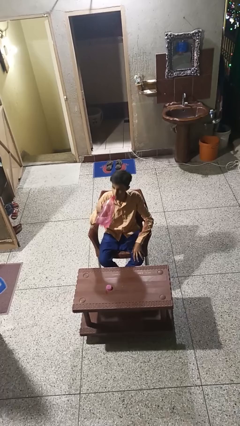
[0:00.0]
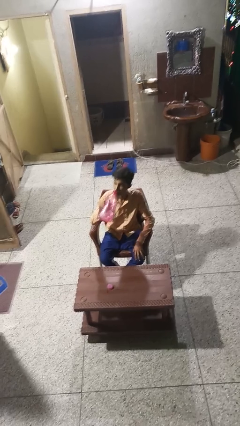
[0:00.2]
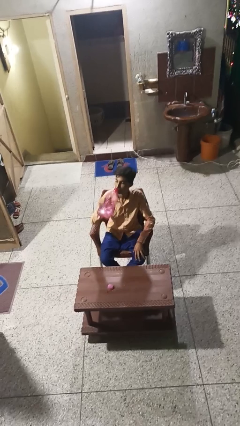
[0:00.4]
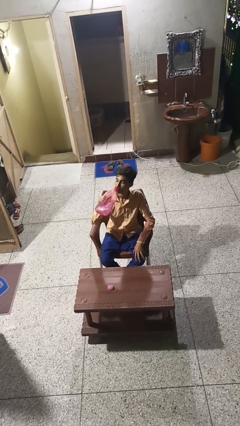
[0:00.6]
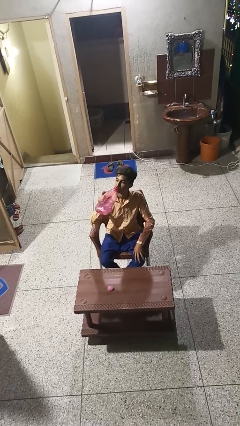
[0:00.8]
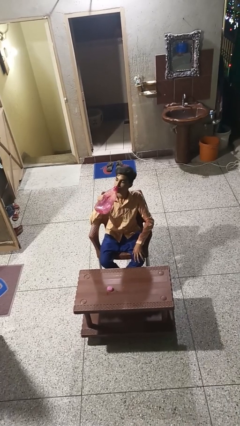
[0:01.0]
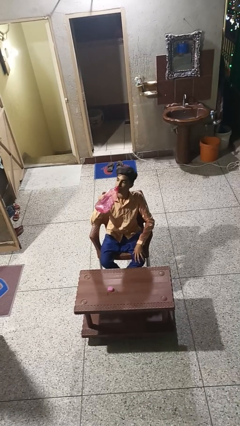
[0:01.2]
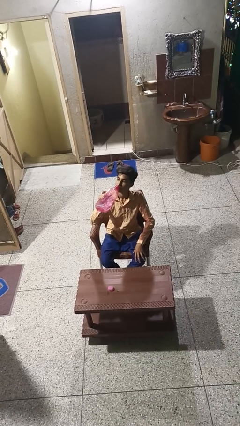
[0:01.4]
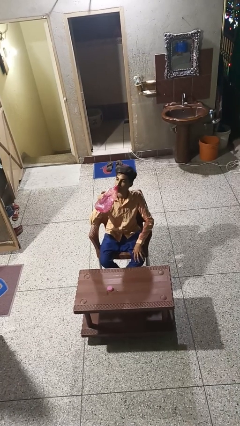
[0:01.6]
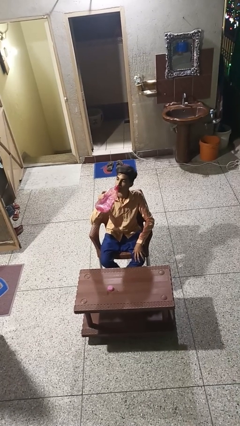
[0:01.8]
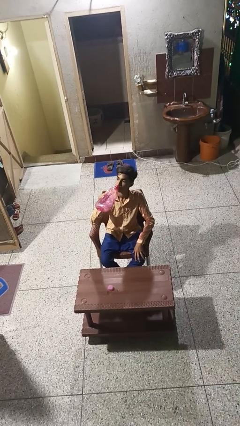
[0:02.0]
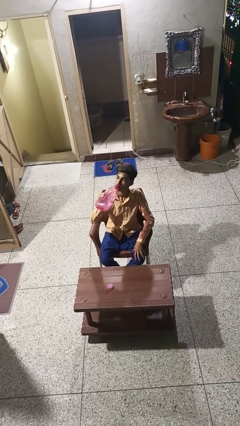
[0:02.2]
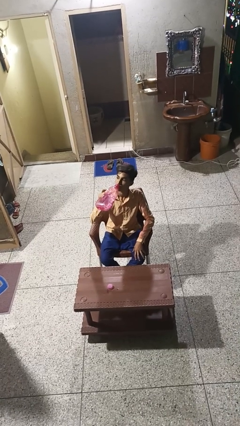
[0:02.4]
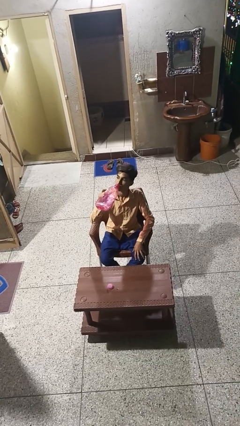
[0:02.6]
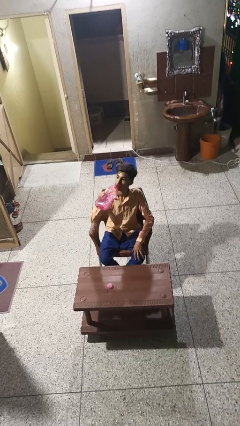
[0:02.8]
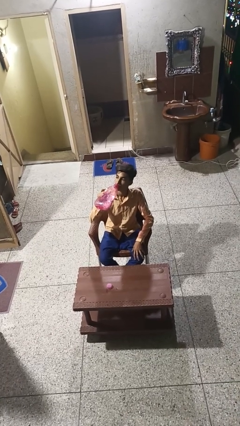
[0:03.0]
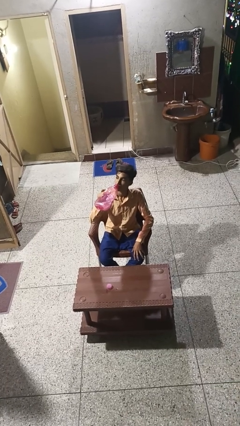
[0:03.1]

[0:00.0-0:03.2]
person drinks from bottle

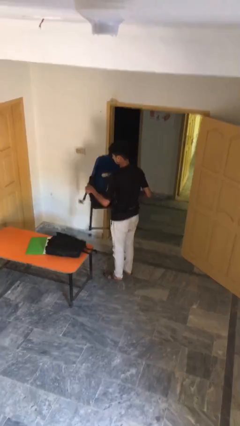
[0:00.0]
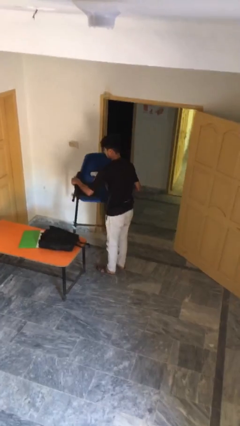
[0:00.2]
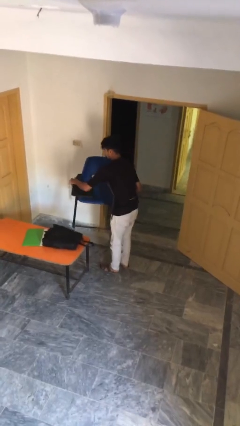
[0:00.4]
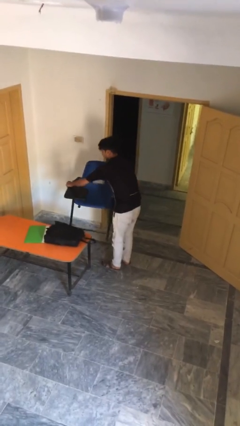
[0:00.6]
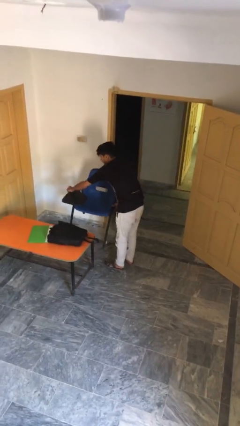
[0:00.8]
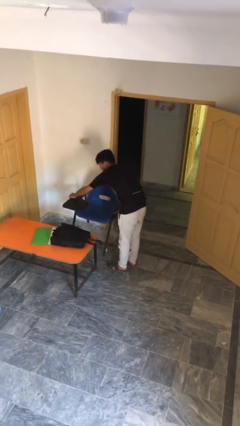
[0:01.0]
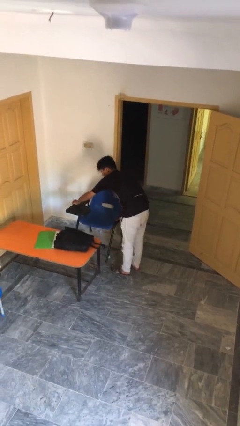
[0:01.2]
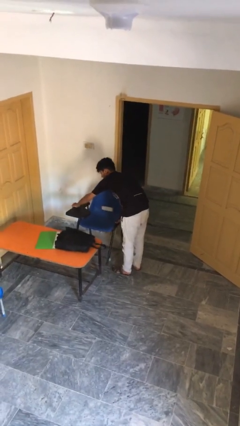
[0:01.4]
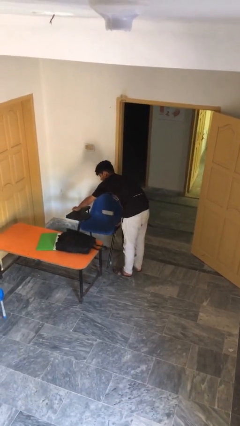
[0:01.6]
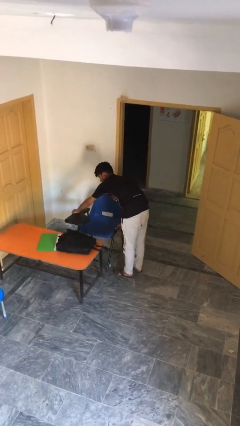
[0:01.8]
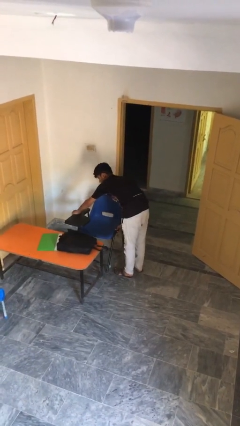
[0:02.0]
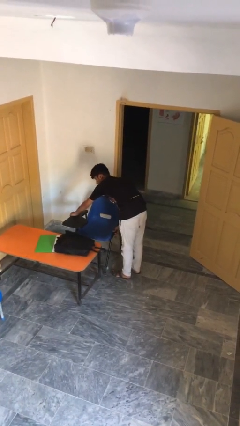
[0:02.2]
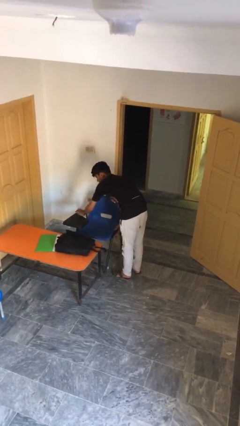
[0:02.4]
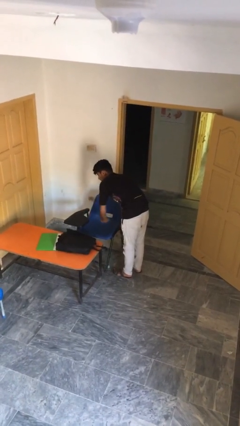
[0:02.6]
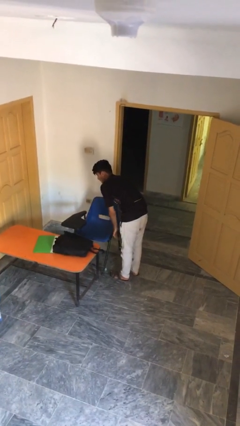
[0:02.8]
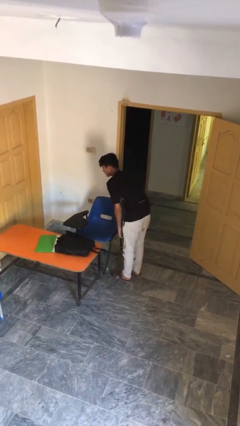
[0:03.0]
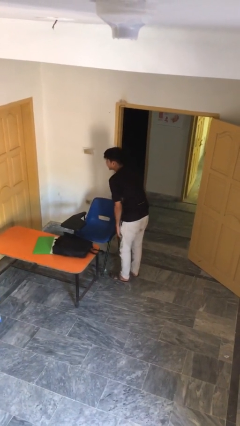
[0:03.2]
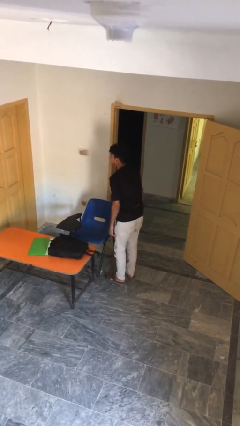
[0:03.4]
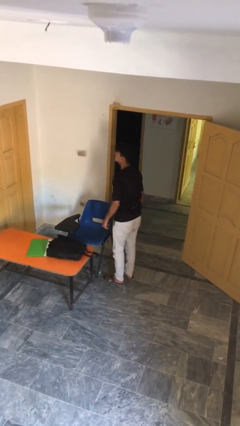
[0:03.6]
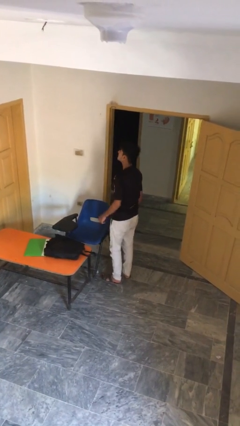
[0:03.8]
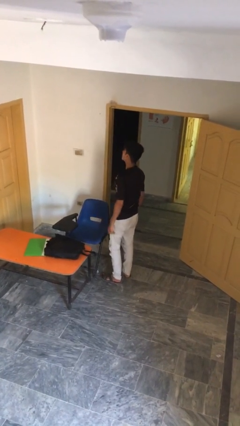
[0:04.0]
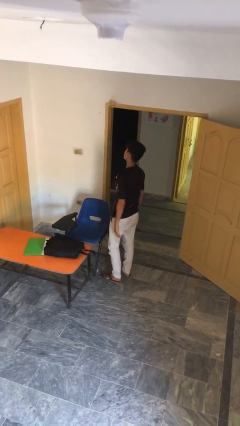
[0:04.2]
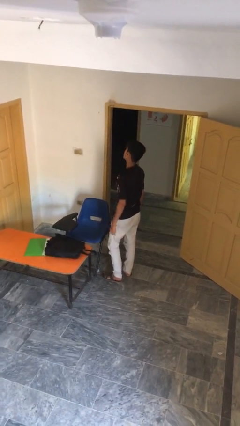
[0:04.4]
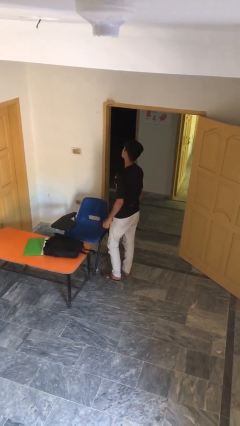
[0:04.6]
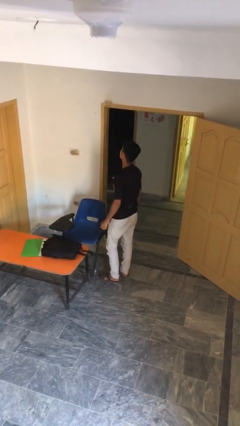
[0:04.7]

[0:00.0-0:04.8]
person puts down object on floor

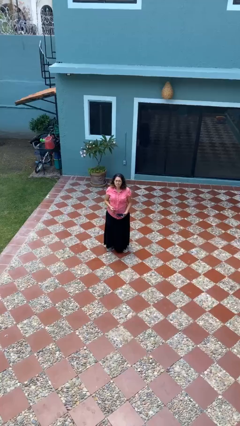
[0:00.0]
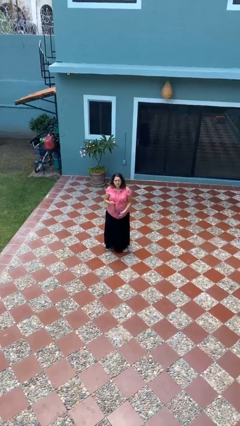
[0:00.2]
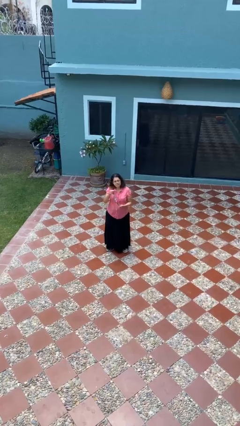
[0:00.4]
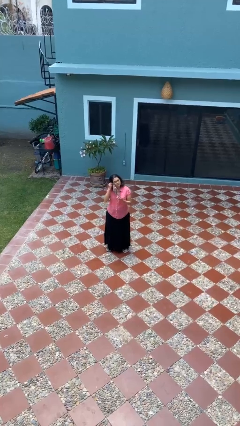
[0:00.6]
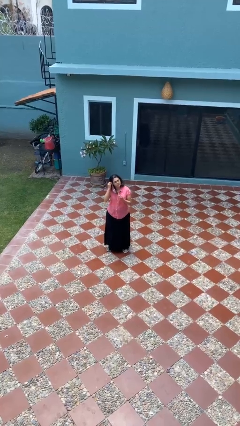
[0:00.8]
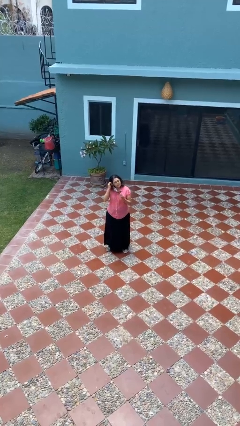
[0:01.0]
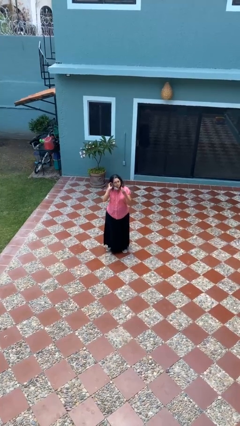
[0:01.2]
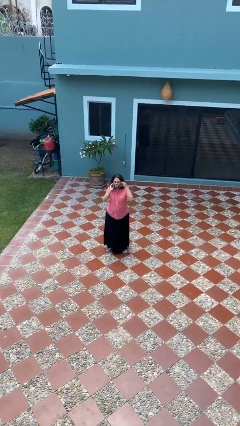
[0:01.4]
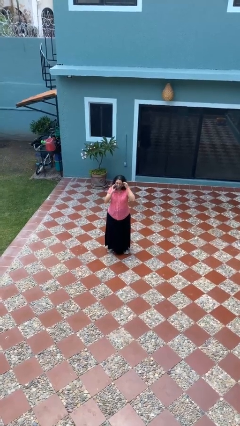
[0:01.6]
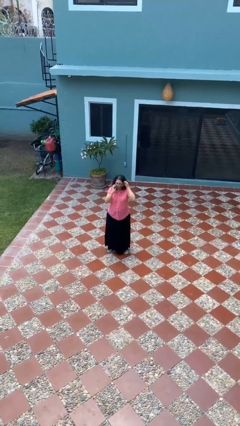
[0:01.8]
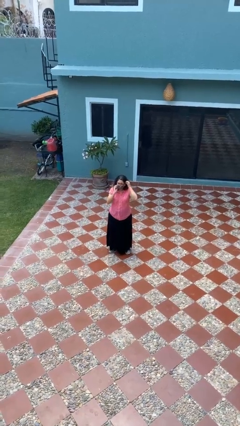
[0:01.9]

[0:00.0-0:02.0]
person puts on facemask

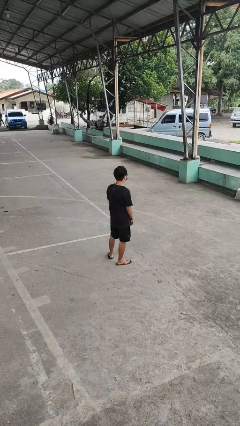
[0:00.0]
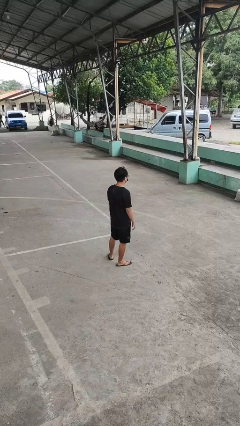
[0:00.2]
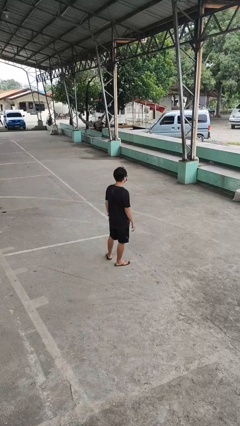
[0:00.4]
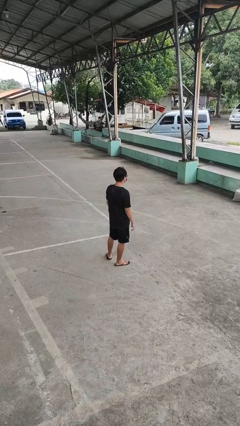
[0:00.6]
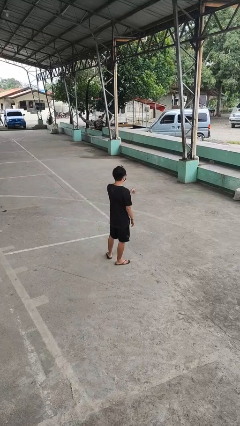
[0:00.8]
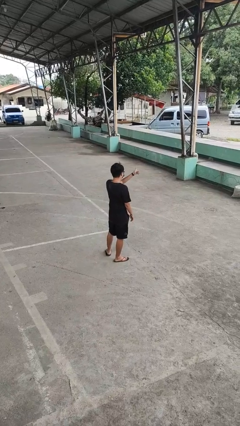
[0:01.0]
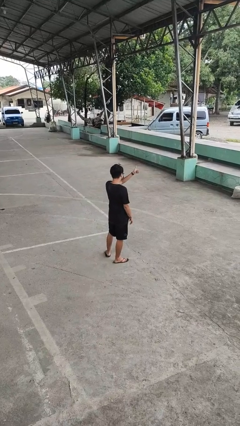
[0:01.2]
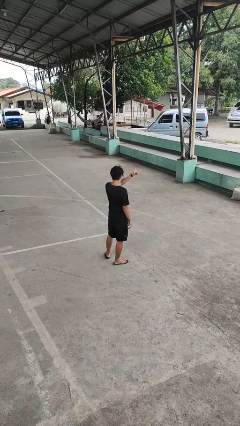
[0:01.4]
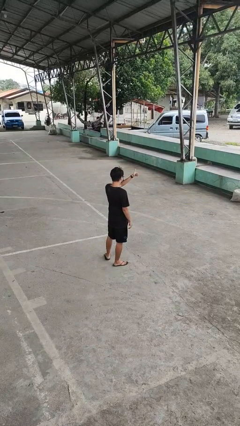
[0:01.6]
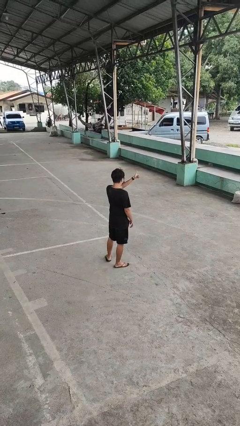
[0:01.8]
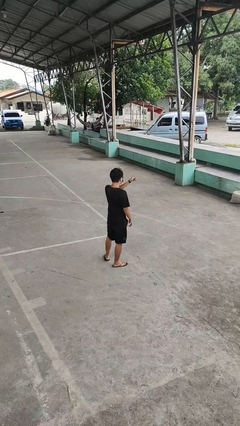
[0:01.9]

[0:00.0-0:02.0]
person gestures thumbs up

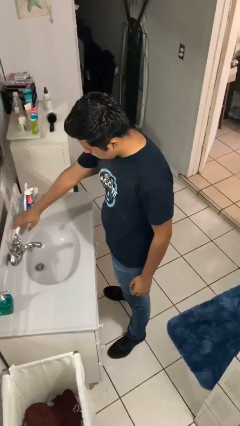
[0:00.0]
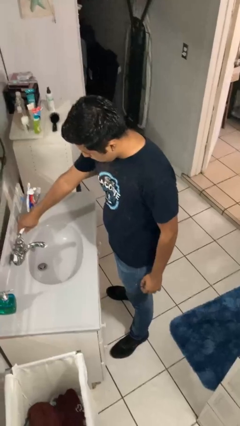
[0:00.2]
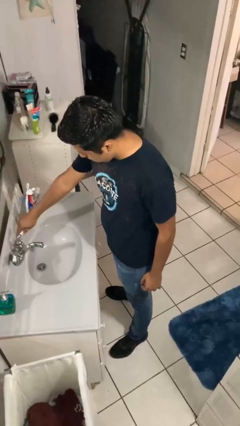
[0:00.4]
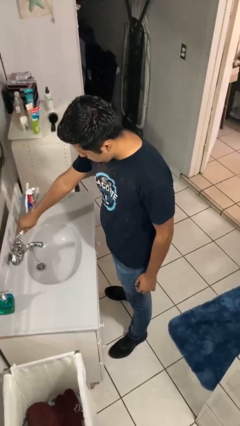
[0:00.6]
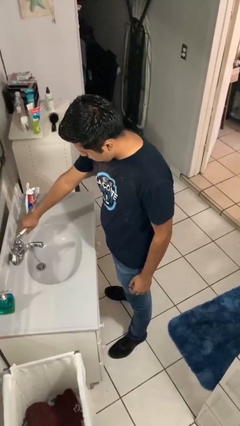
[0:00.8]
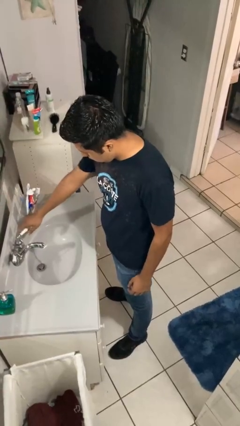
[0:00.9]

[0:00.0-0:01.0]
person turns on faucet

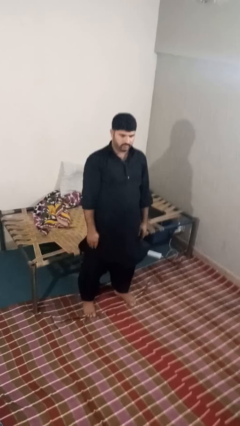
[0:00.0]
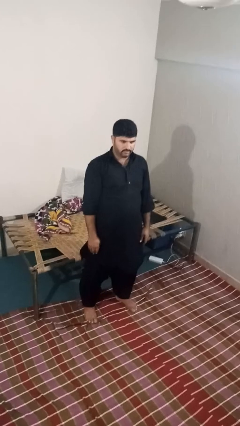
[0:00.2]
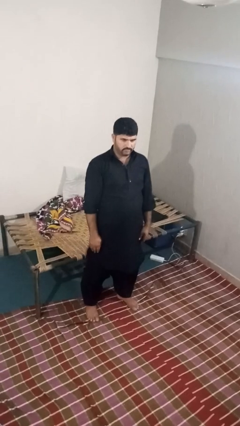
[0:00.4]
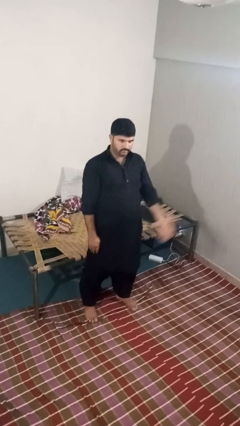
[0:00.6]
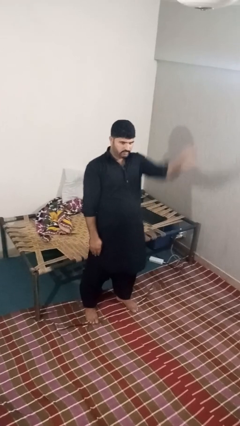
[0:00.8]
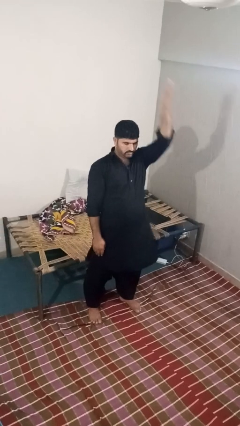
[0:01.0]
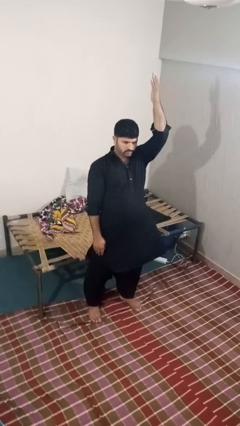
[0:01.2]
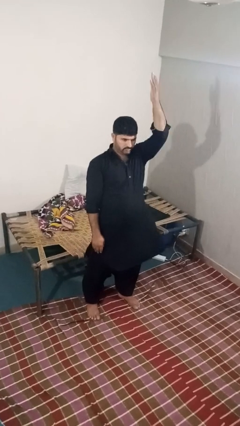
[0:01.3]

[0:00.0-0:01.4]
person gestures swipe up

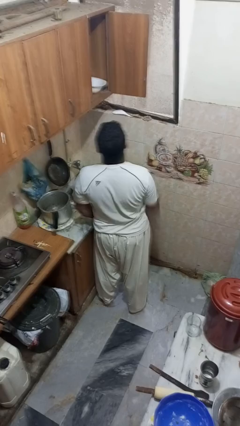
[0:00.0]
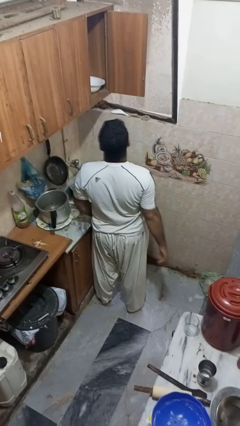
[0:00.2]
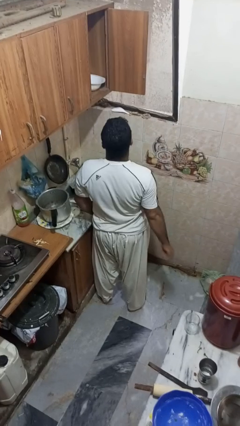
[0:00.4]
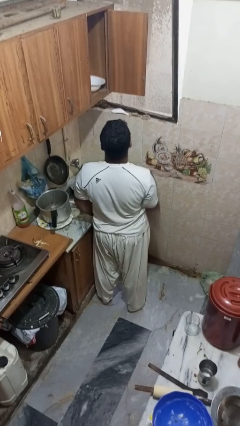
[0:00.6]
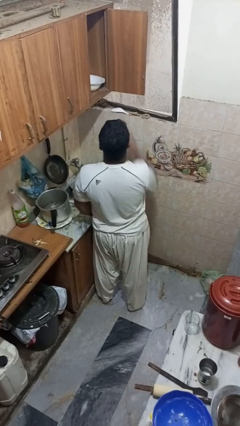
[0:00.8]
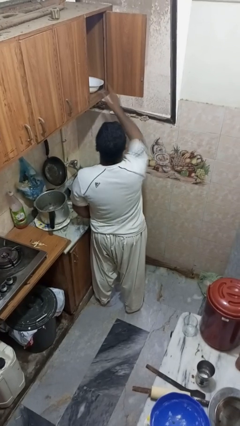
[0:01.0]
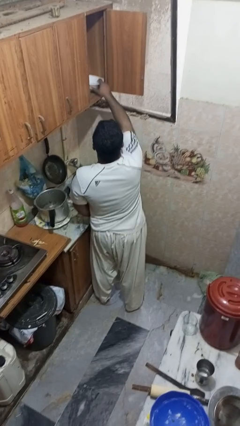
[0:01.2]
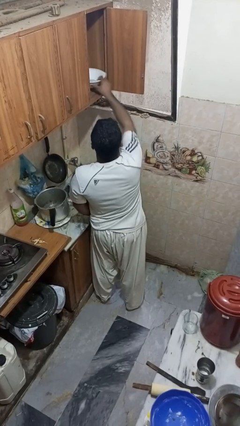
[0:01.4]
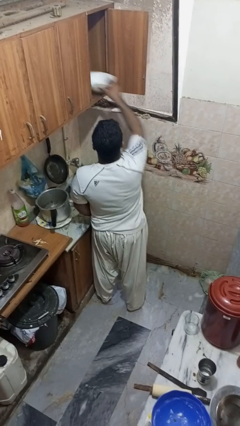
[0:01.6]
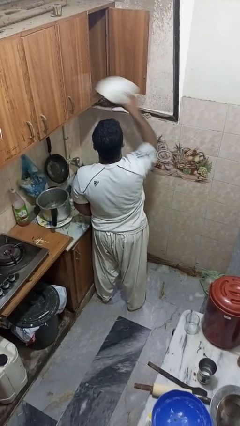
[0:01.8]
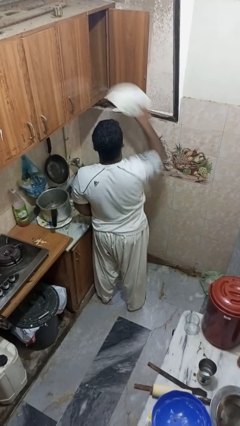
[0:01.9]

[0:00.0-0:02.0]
person takes object from cabinet

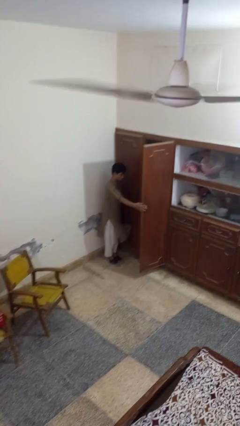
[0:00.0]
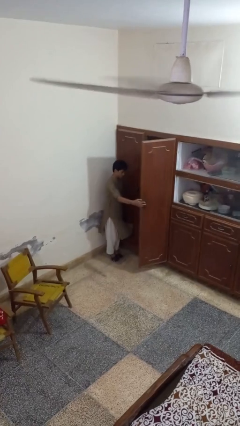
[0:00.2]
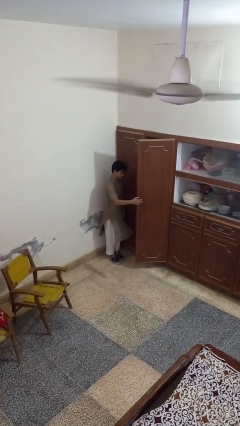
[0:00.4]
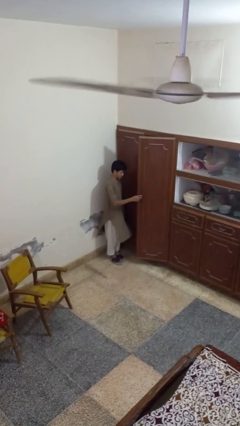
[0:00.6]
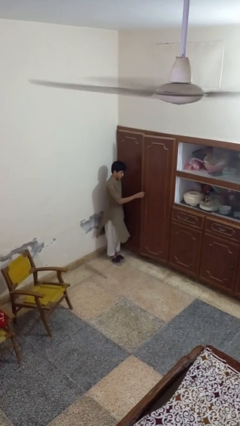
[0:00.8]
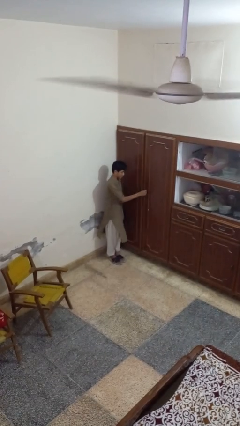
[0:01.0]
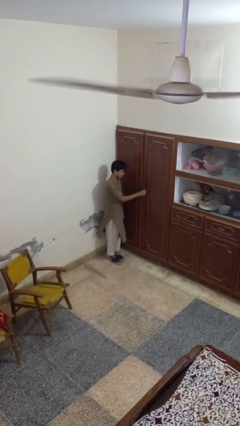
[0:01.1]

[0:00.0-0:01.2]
person closes closet door
